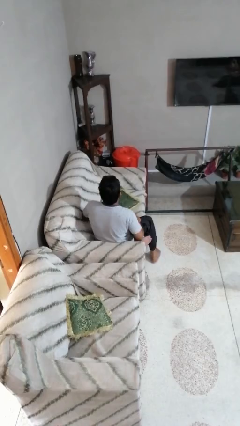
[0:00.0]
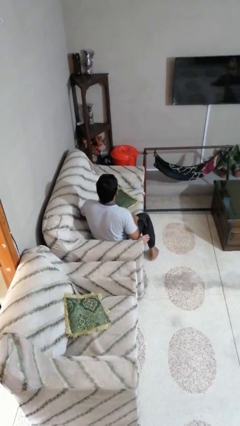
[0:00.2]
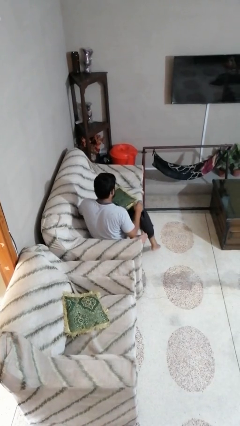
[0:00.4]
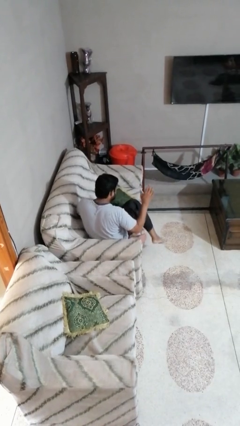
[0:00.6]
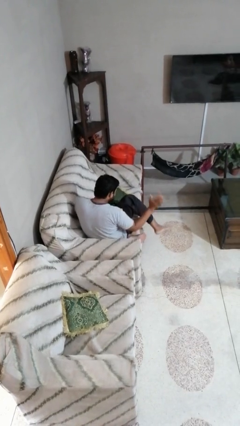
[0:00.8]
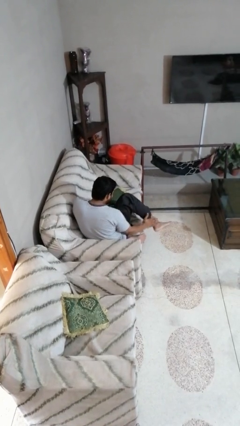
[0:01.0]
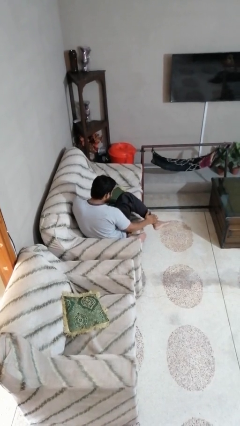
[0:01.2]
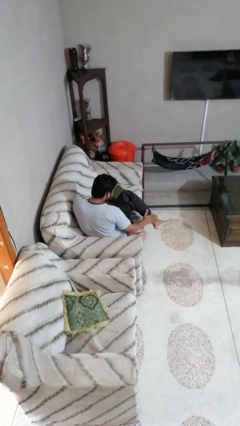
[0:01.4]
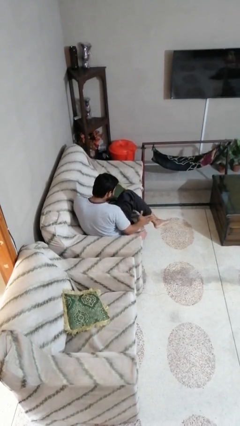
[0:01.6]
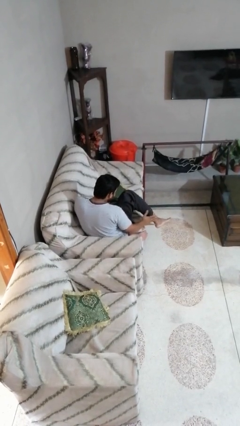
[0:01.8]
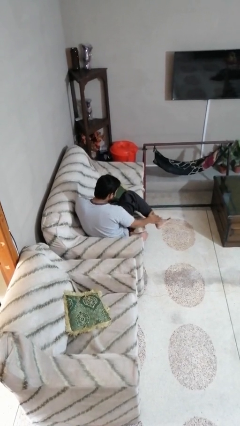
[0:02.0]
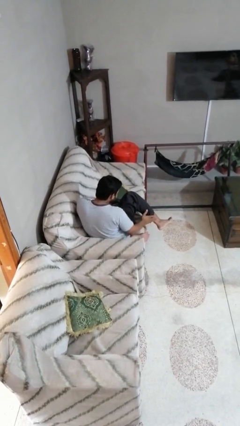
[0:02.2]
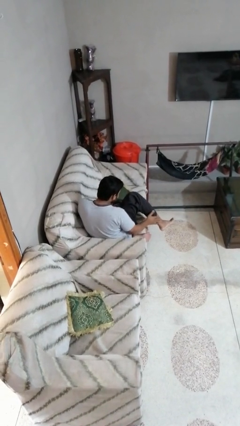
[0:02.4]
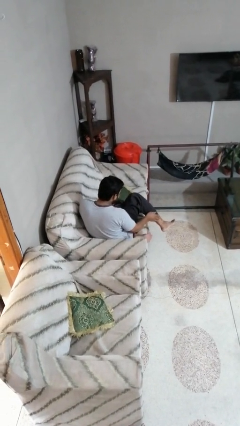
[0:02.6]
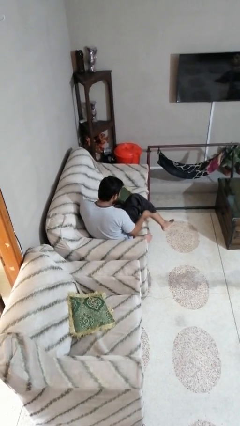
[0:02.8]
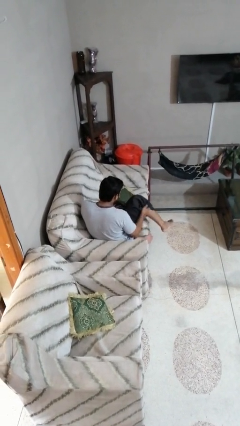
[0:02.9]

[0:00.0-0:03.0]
person swats bug

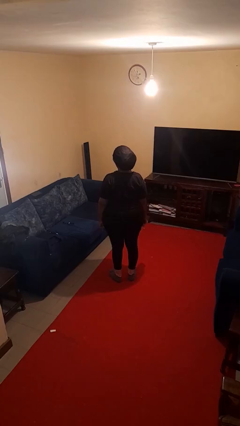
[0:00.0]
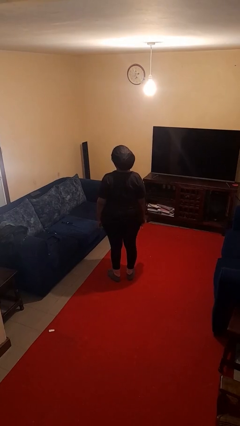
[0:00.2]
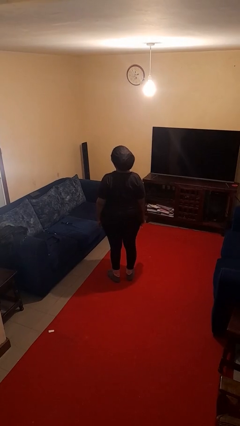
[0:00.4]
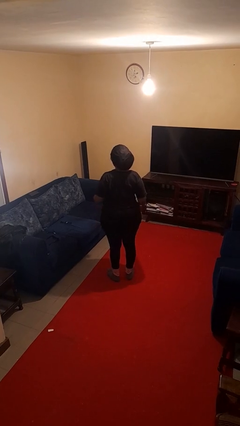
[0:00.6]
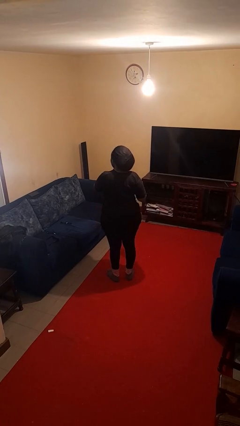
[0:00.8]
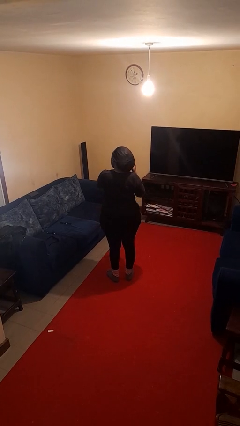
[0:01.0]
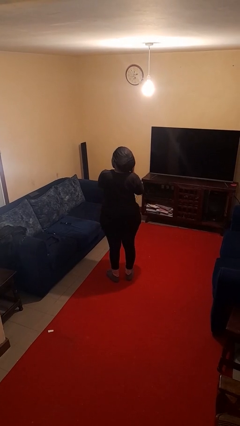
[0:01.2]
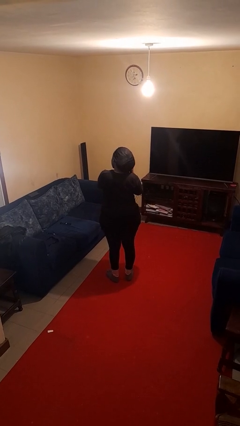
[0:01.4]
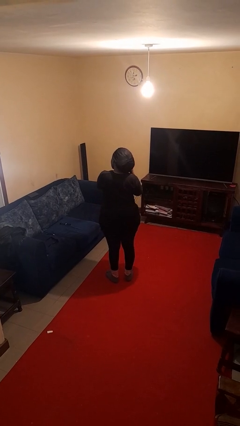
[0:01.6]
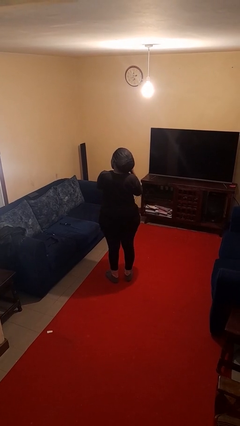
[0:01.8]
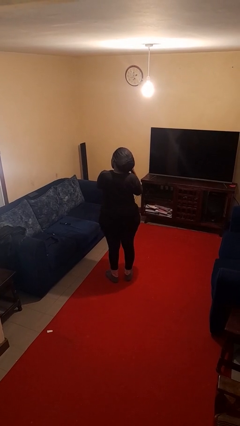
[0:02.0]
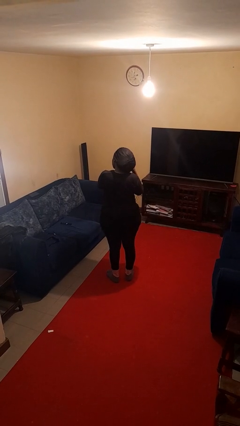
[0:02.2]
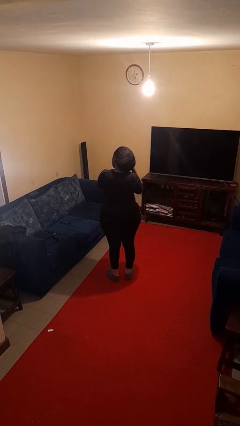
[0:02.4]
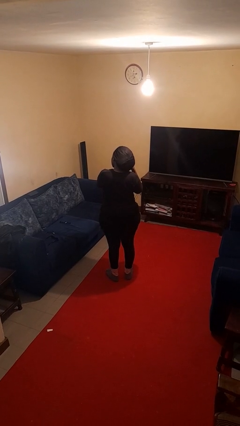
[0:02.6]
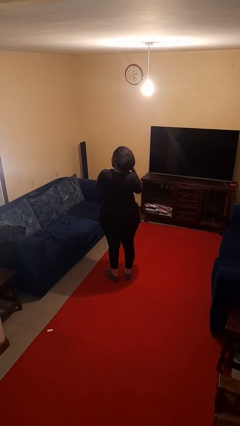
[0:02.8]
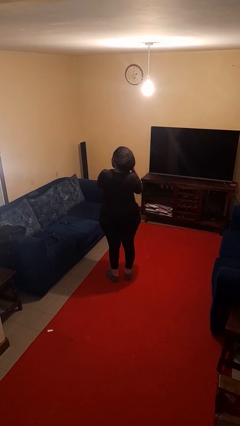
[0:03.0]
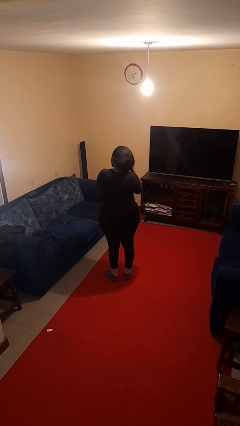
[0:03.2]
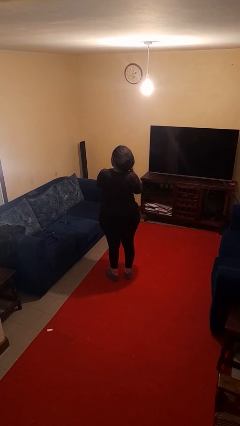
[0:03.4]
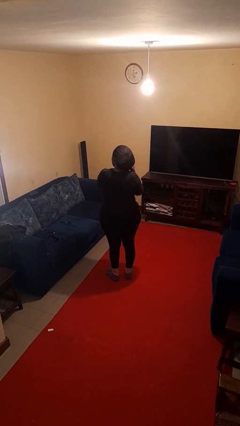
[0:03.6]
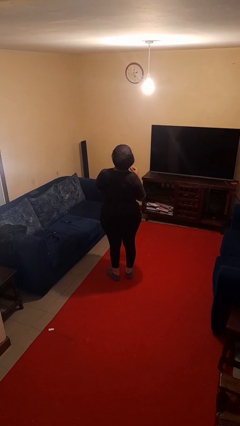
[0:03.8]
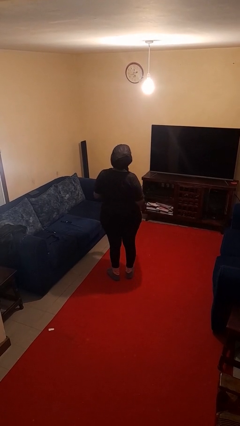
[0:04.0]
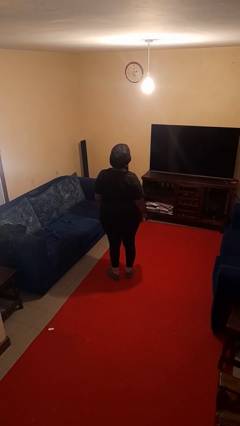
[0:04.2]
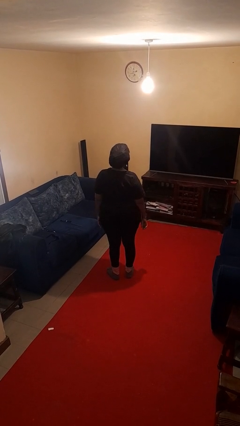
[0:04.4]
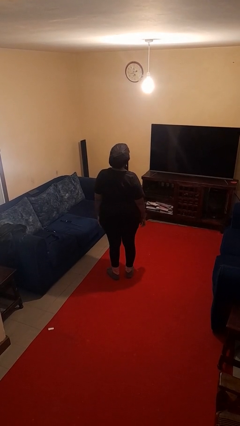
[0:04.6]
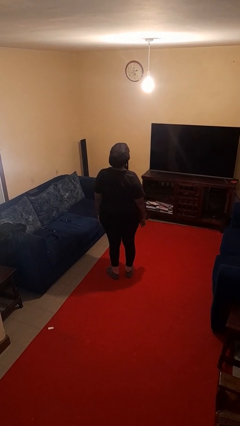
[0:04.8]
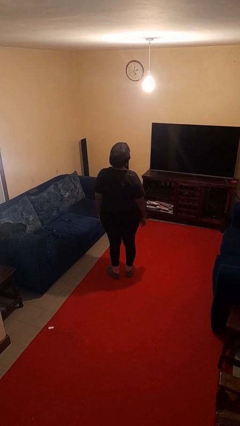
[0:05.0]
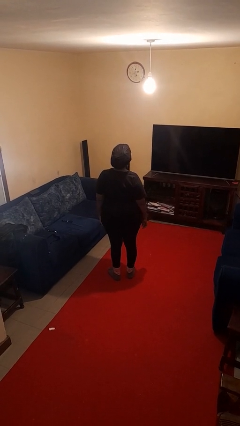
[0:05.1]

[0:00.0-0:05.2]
person puts on earrings

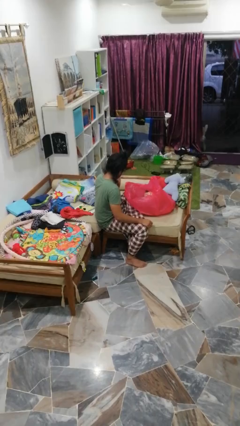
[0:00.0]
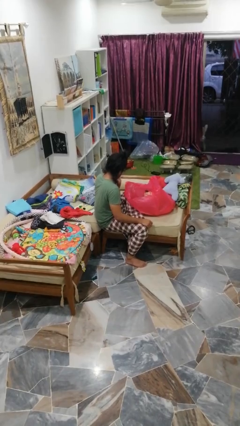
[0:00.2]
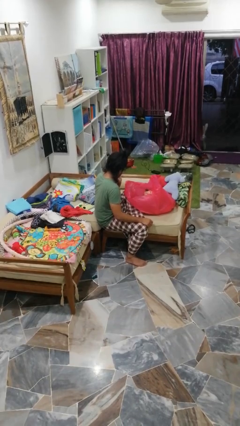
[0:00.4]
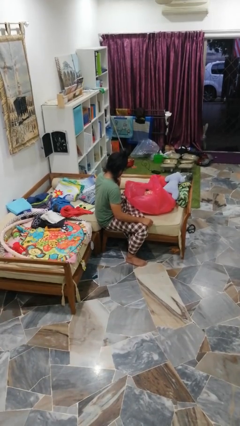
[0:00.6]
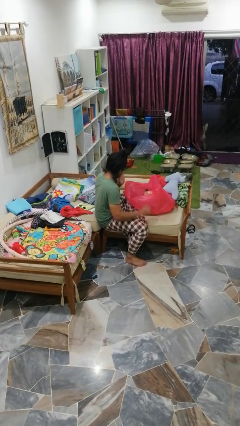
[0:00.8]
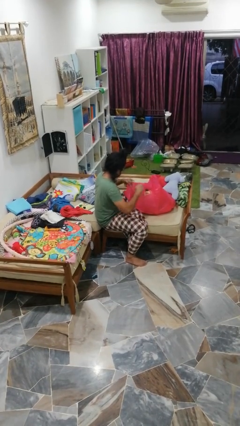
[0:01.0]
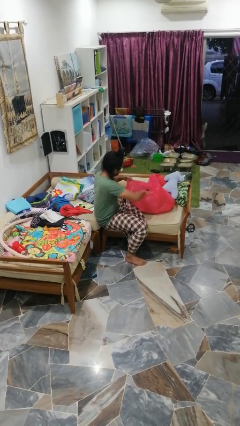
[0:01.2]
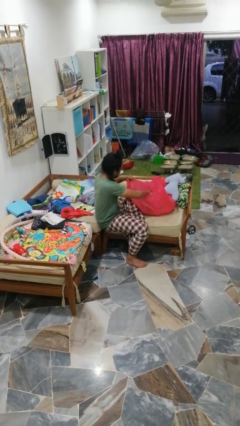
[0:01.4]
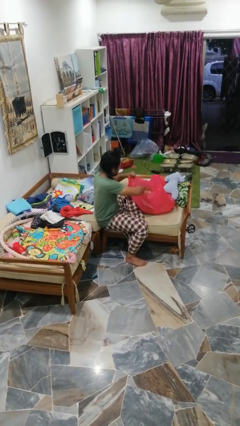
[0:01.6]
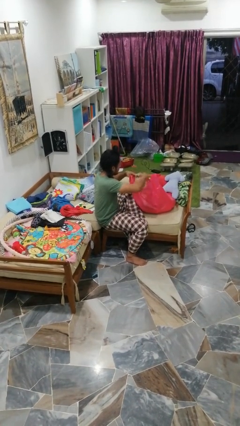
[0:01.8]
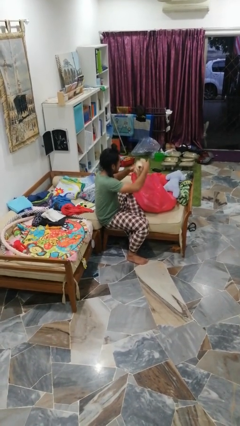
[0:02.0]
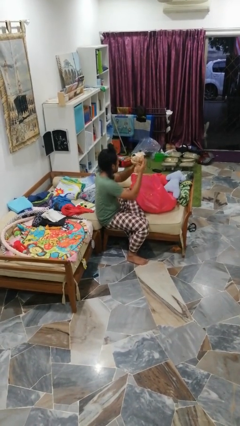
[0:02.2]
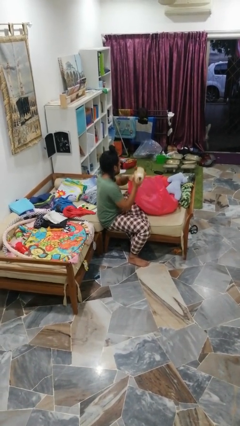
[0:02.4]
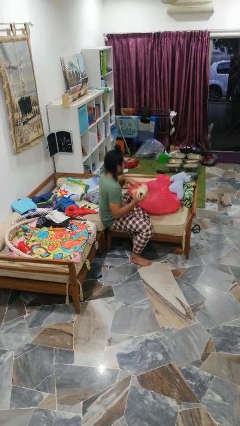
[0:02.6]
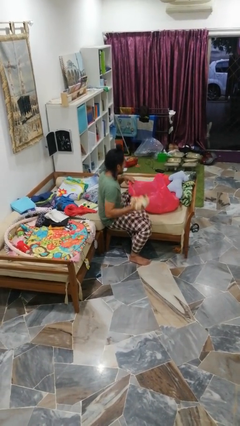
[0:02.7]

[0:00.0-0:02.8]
person takes object from bag

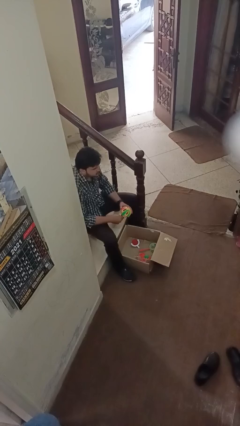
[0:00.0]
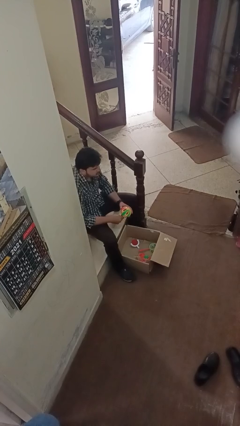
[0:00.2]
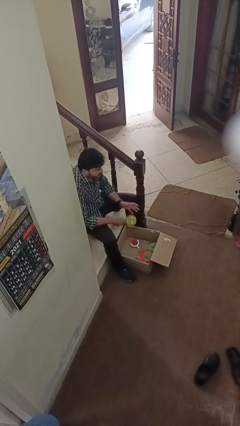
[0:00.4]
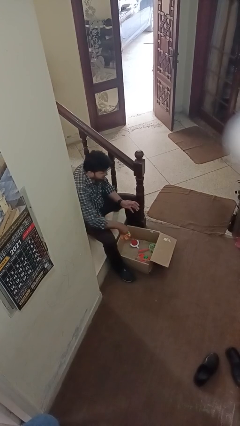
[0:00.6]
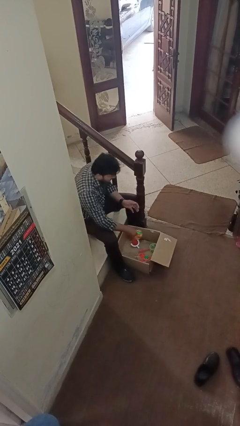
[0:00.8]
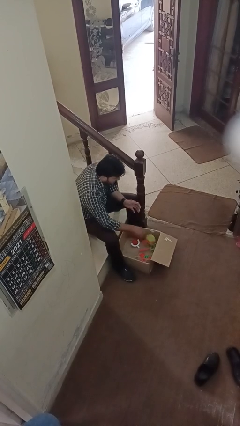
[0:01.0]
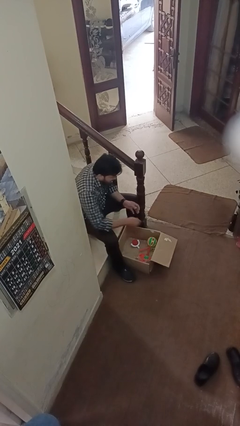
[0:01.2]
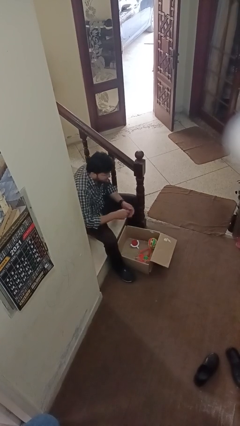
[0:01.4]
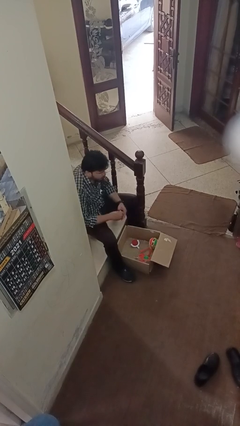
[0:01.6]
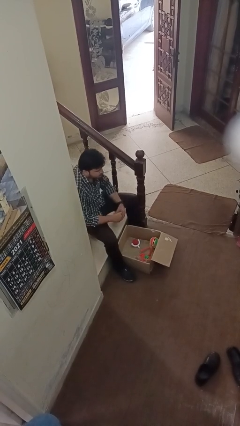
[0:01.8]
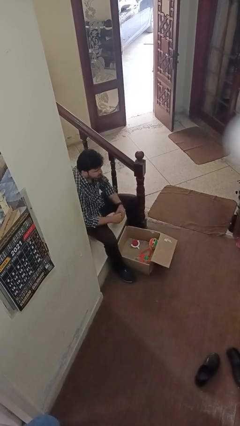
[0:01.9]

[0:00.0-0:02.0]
person puts object into box

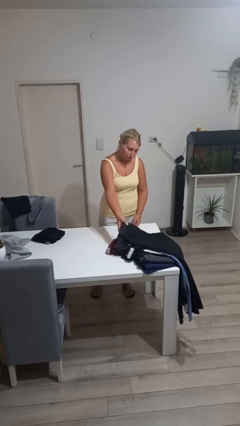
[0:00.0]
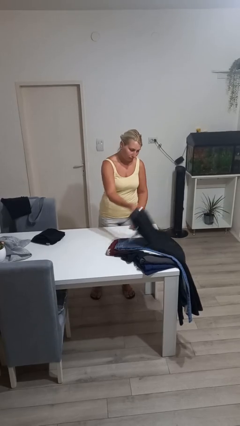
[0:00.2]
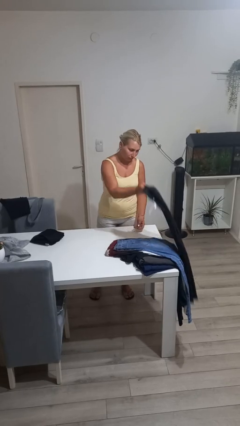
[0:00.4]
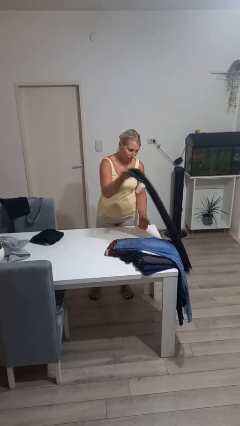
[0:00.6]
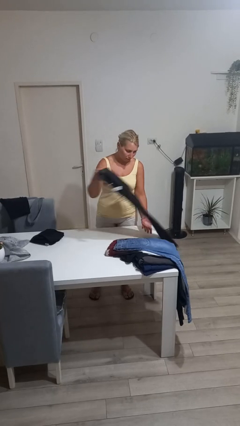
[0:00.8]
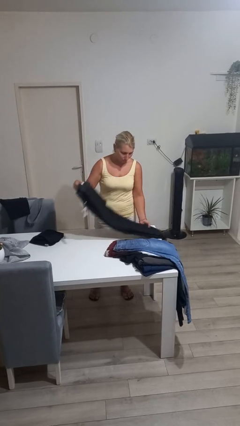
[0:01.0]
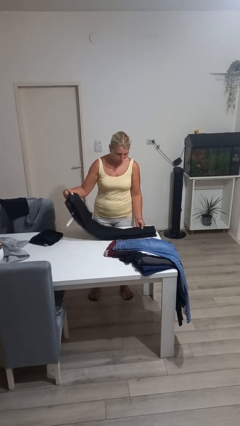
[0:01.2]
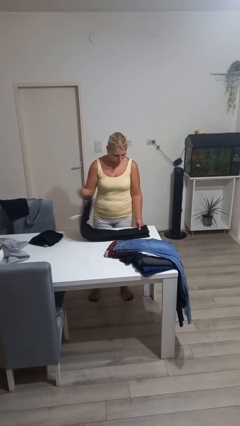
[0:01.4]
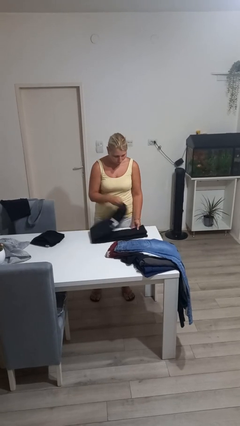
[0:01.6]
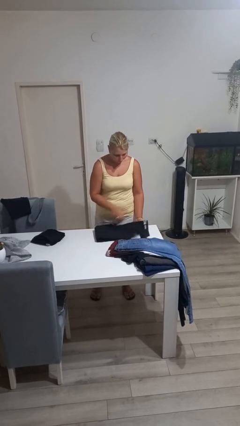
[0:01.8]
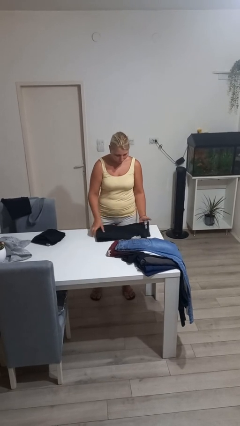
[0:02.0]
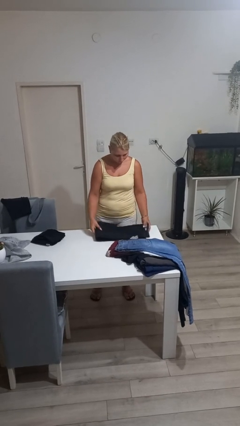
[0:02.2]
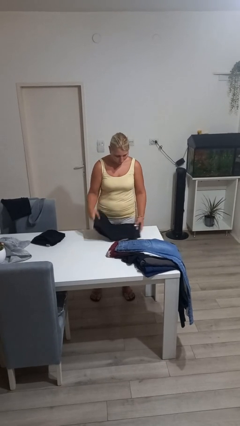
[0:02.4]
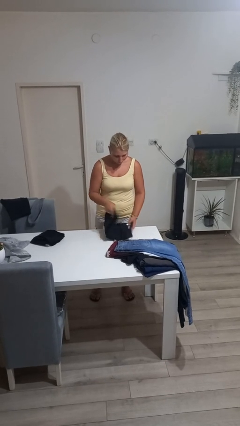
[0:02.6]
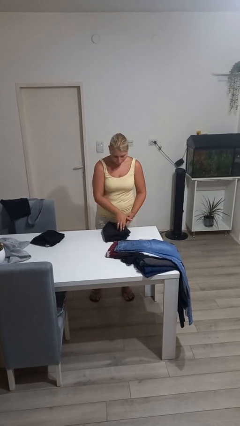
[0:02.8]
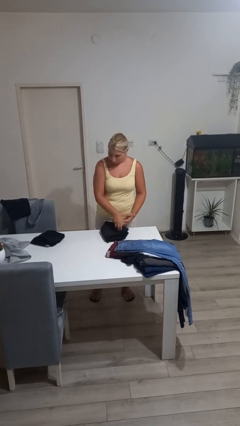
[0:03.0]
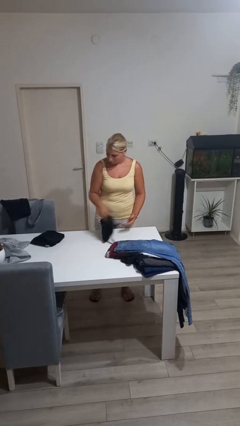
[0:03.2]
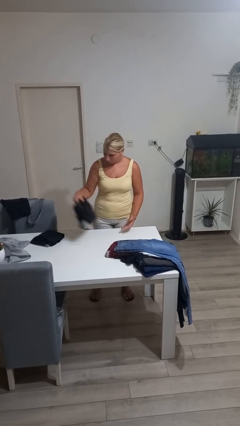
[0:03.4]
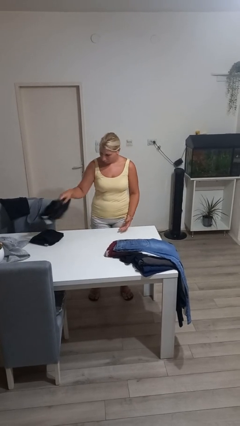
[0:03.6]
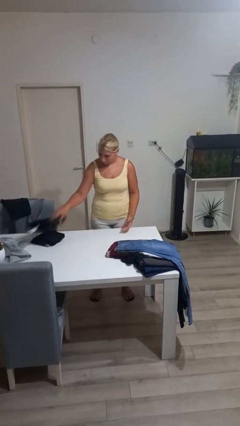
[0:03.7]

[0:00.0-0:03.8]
person folds pants

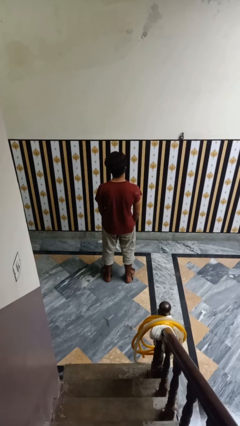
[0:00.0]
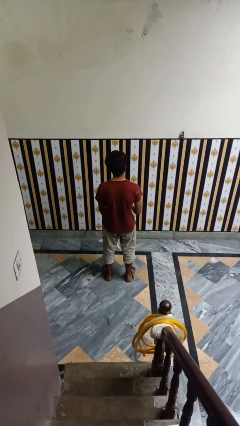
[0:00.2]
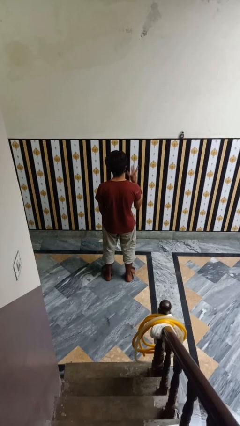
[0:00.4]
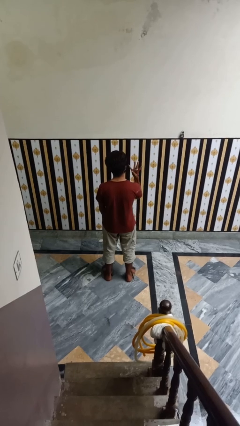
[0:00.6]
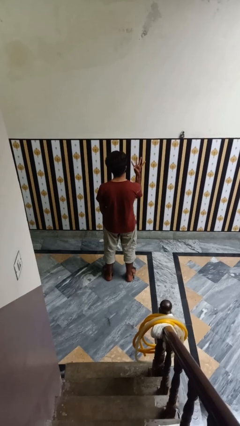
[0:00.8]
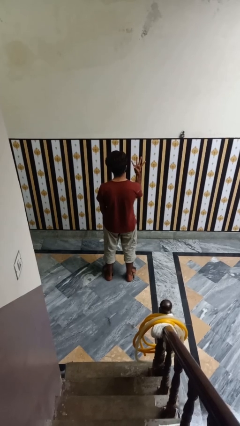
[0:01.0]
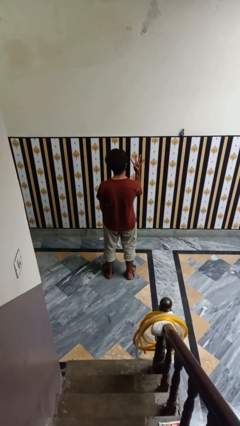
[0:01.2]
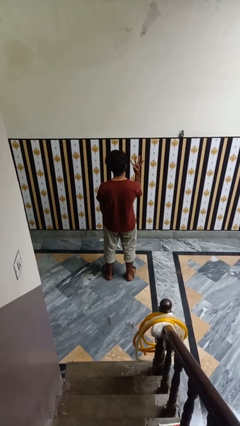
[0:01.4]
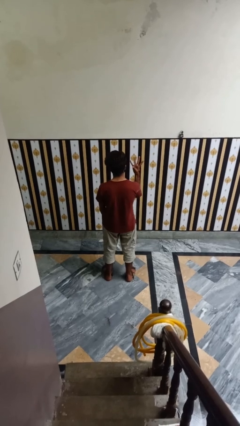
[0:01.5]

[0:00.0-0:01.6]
person gestures number four
